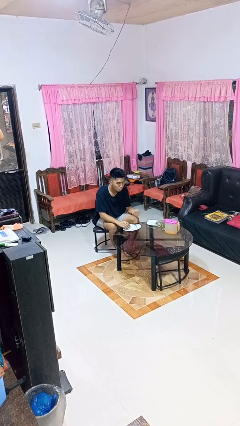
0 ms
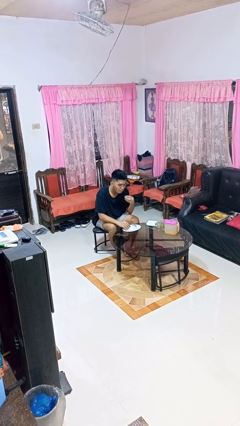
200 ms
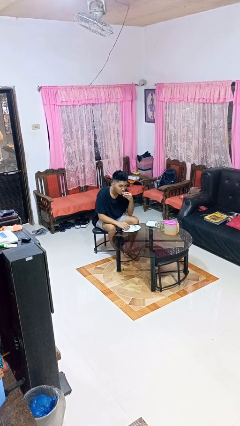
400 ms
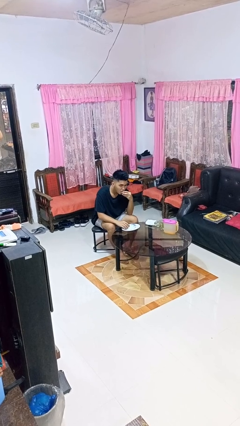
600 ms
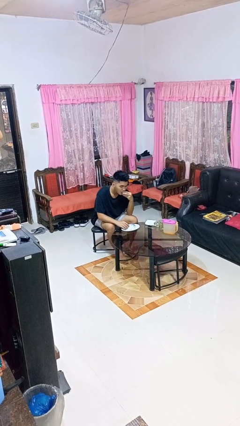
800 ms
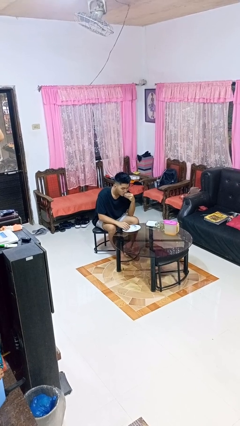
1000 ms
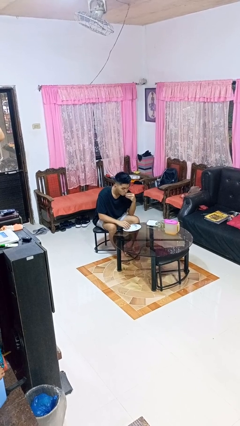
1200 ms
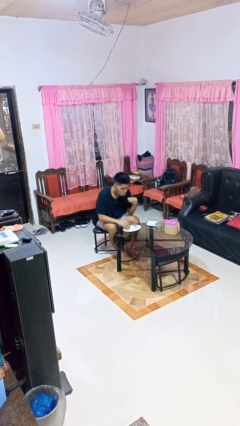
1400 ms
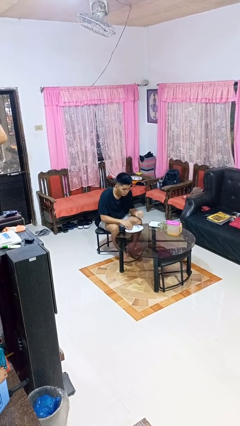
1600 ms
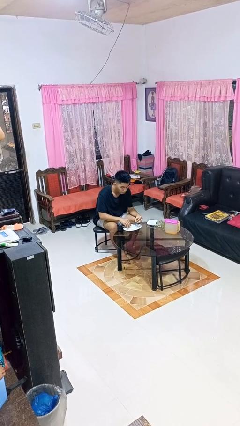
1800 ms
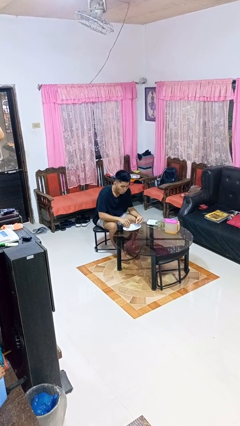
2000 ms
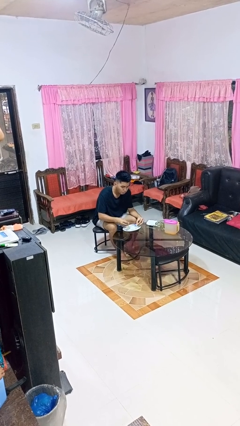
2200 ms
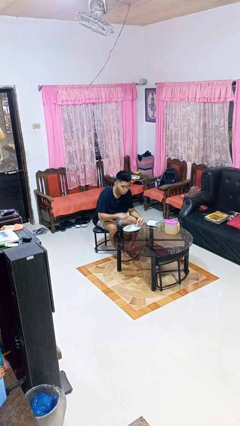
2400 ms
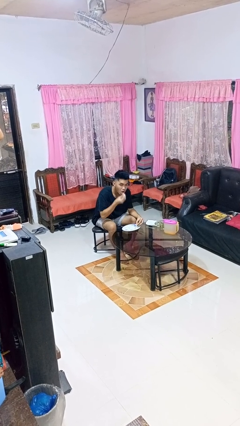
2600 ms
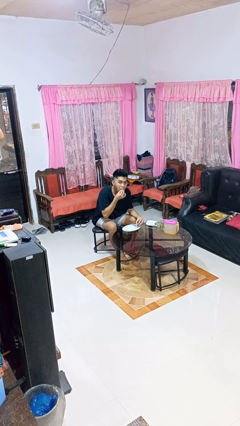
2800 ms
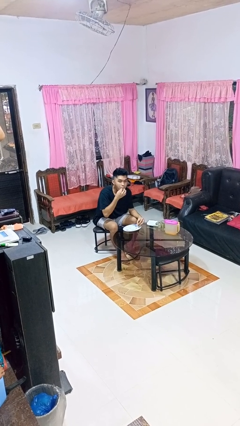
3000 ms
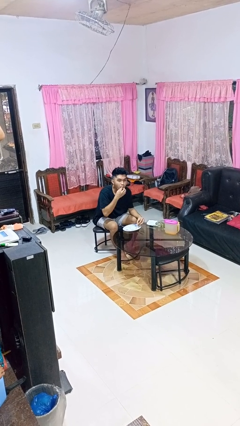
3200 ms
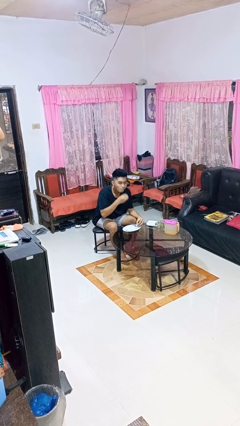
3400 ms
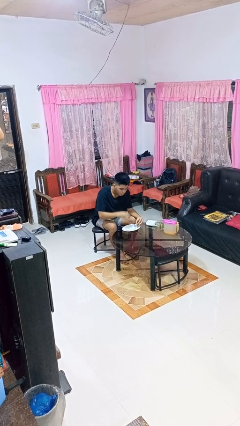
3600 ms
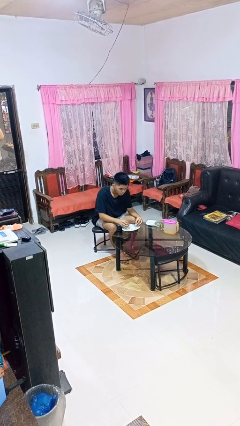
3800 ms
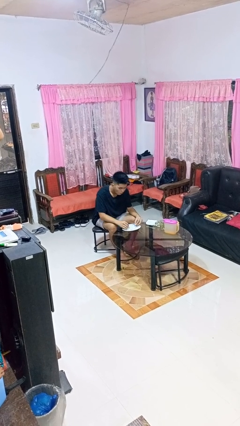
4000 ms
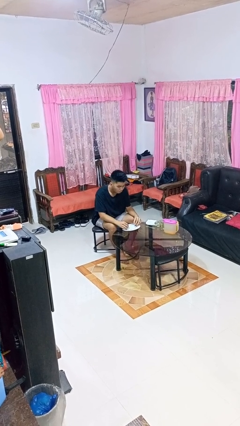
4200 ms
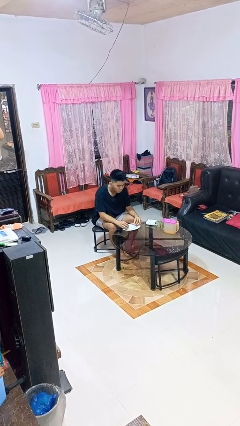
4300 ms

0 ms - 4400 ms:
person eats with hands

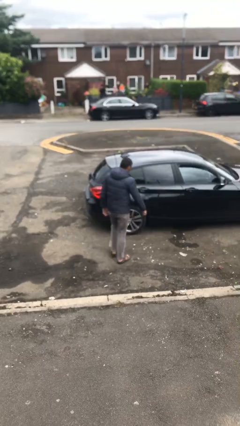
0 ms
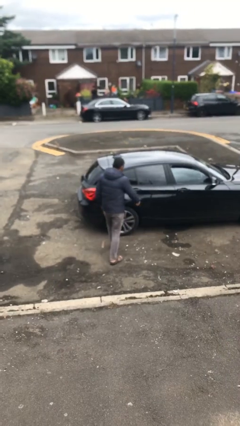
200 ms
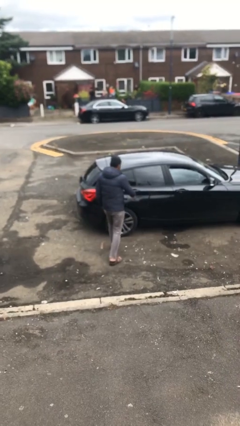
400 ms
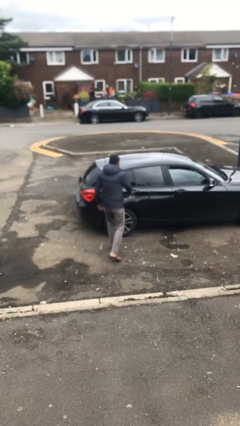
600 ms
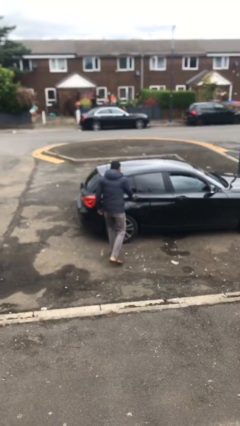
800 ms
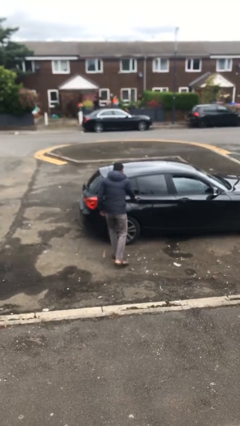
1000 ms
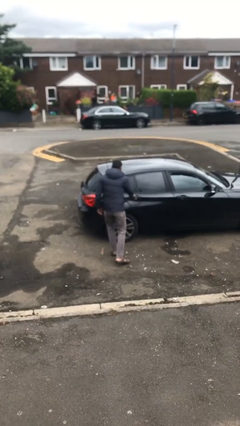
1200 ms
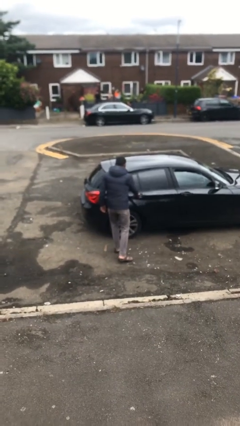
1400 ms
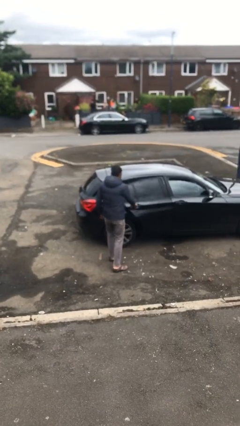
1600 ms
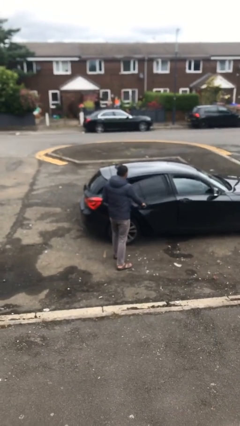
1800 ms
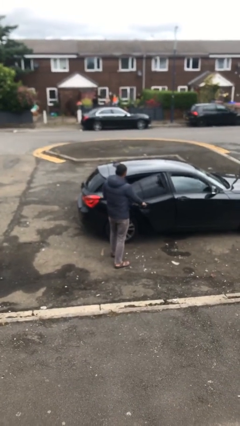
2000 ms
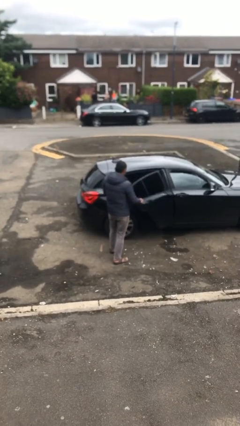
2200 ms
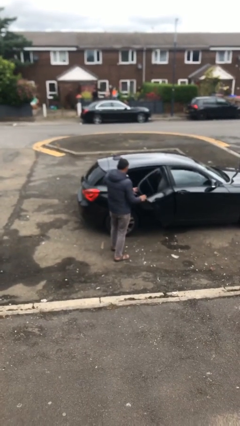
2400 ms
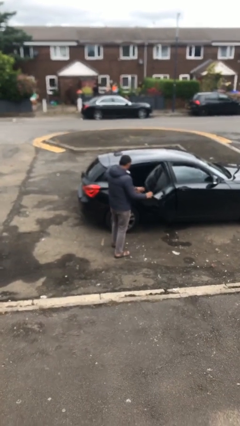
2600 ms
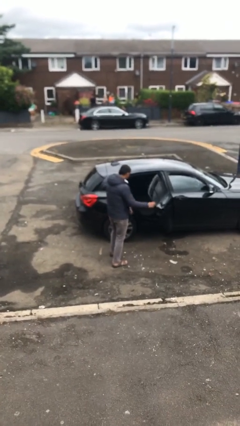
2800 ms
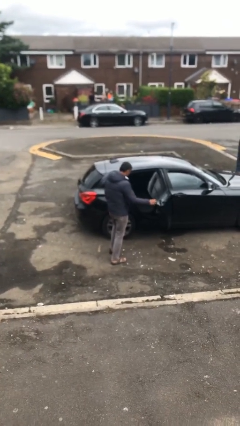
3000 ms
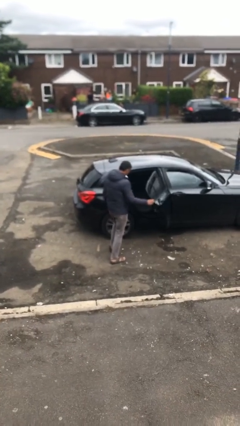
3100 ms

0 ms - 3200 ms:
person opens car door

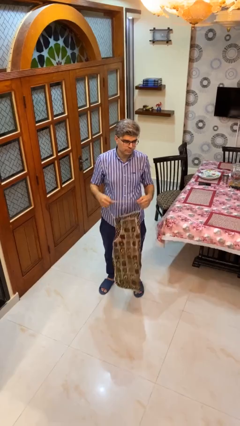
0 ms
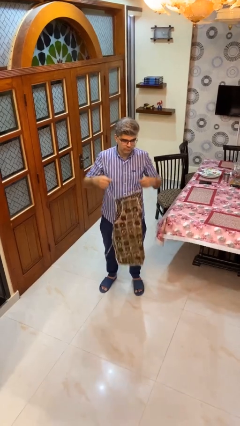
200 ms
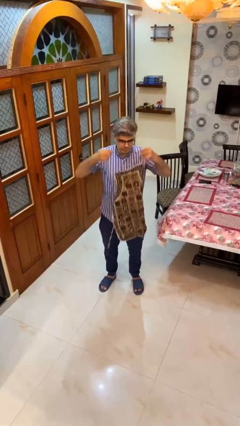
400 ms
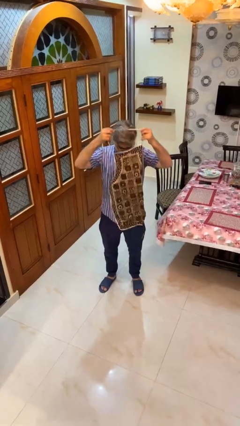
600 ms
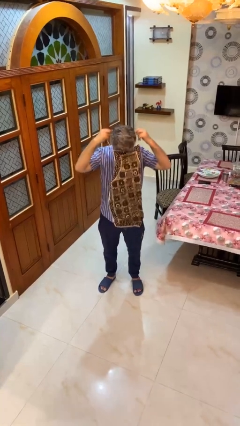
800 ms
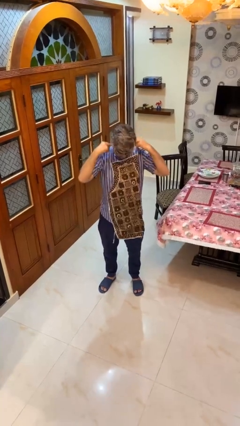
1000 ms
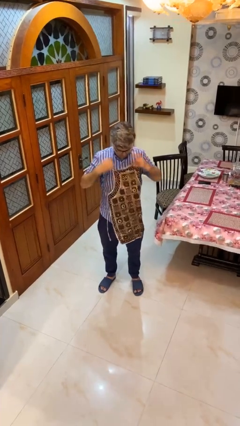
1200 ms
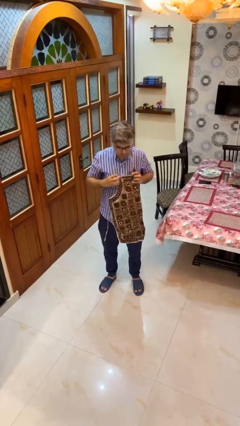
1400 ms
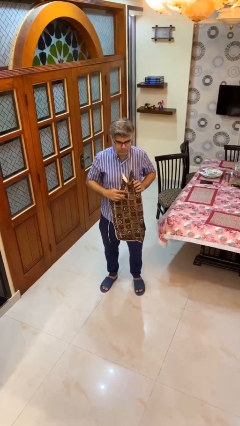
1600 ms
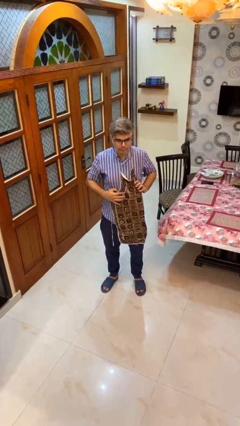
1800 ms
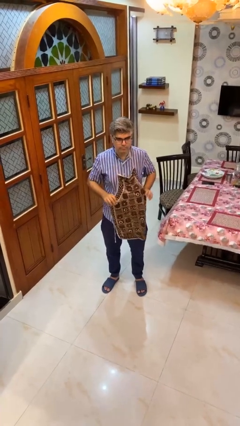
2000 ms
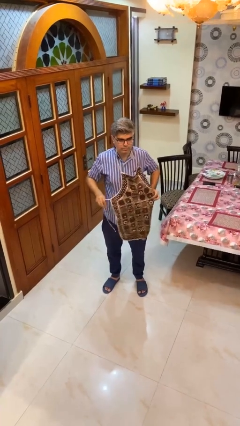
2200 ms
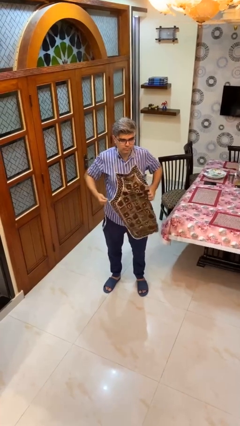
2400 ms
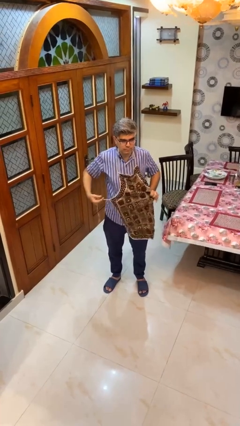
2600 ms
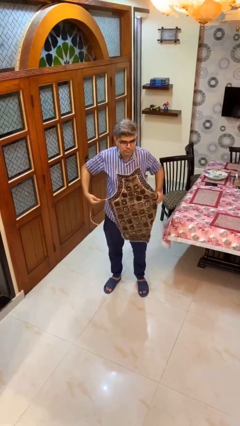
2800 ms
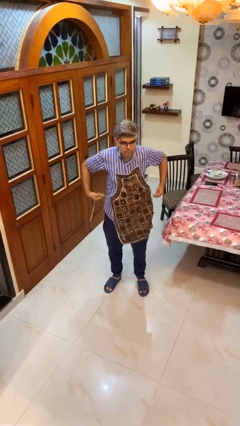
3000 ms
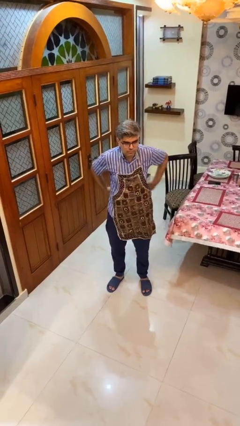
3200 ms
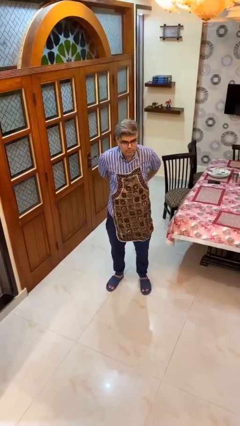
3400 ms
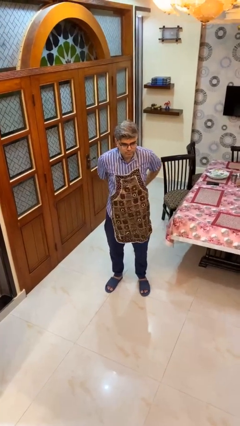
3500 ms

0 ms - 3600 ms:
person puts on apron

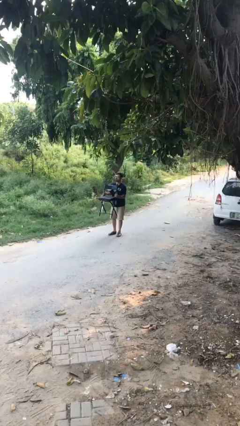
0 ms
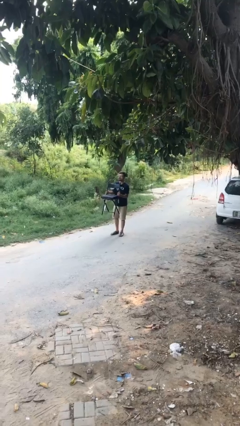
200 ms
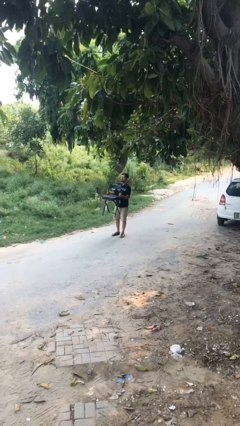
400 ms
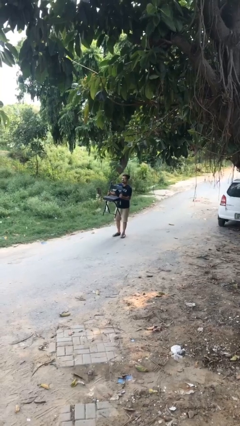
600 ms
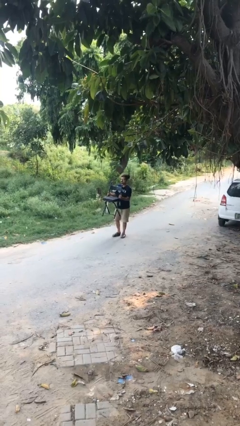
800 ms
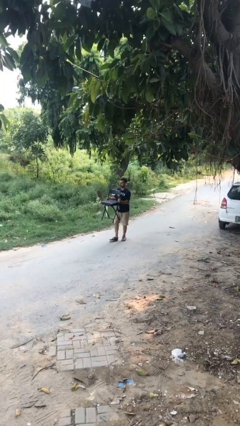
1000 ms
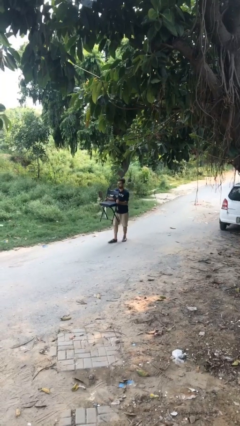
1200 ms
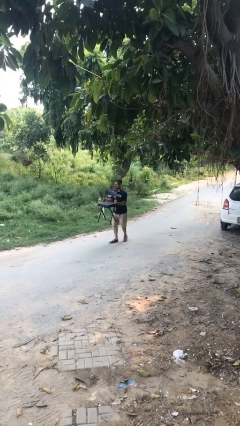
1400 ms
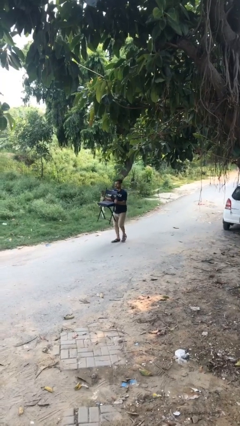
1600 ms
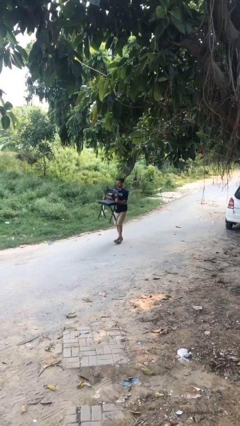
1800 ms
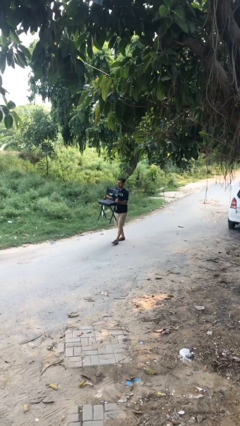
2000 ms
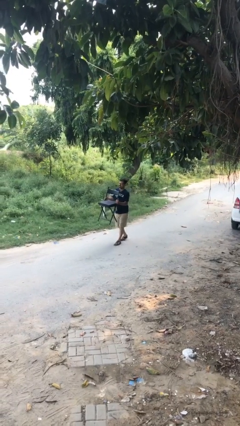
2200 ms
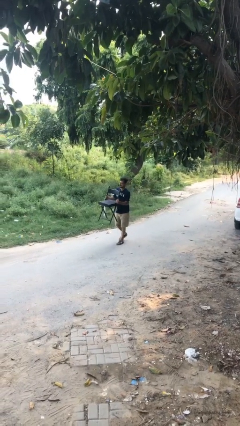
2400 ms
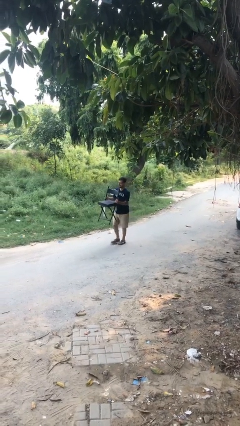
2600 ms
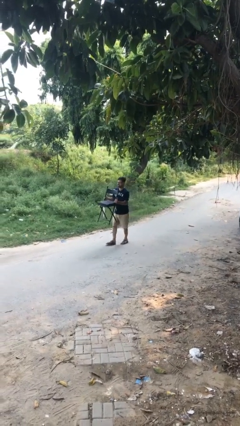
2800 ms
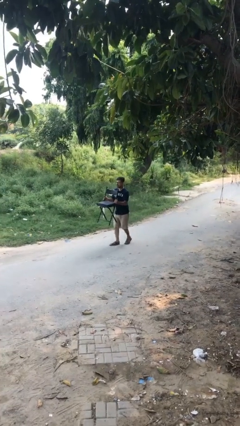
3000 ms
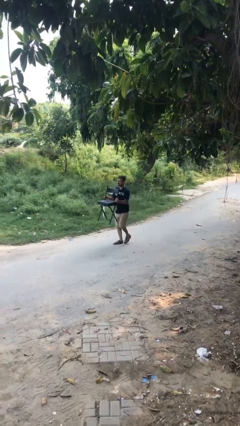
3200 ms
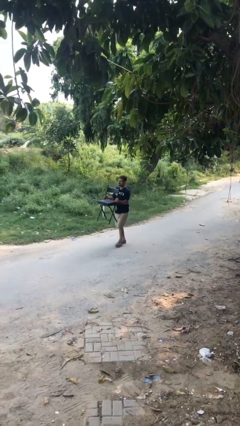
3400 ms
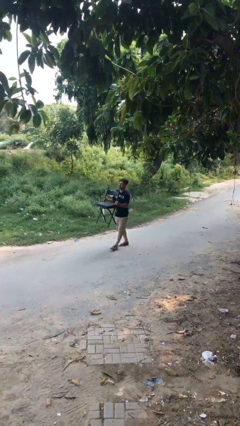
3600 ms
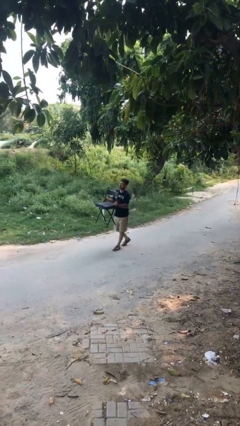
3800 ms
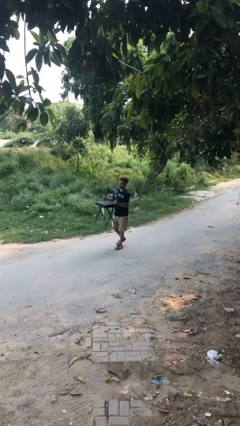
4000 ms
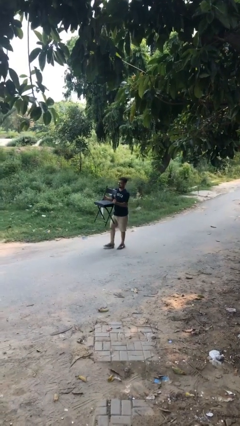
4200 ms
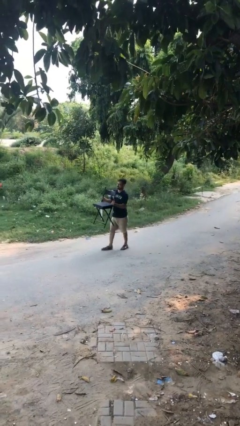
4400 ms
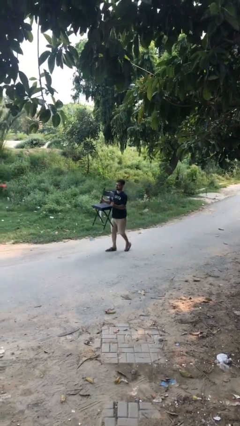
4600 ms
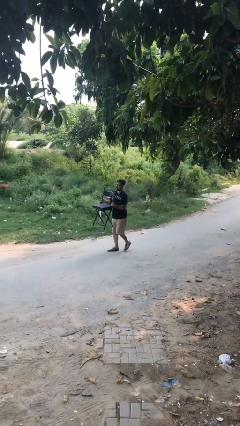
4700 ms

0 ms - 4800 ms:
person carries heavy object

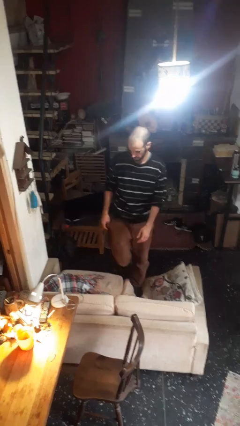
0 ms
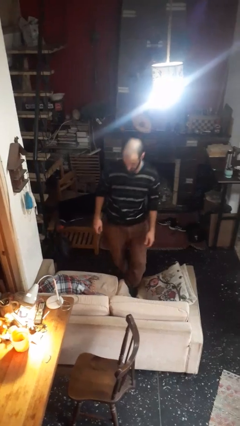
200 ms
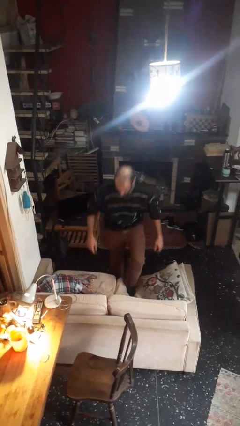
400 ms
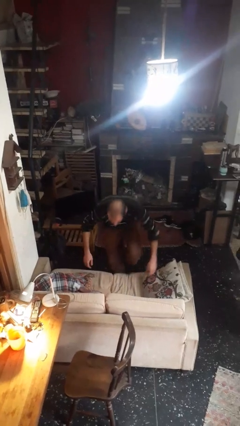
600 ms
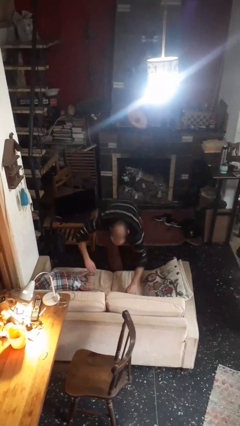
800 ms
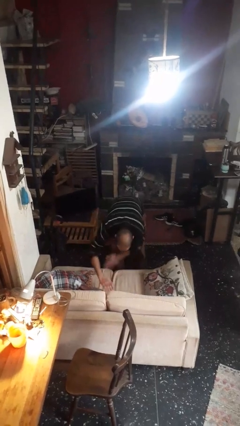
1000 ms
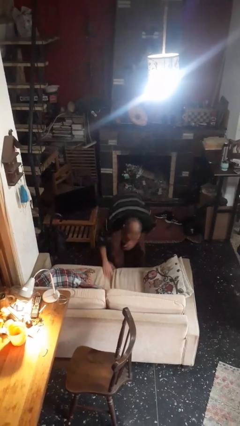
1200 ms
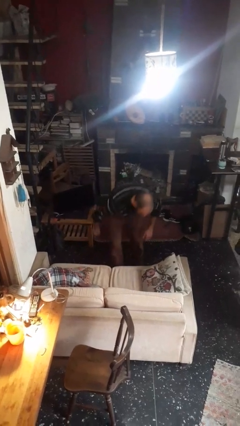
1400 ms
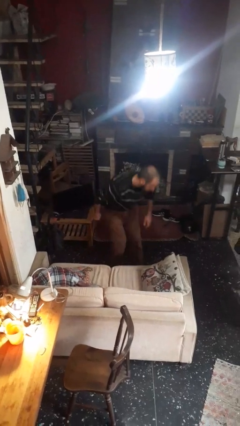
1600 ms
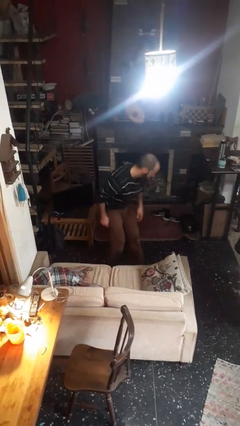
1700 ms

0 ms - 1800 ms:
person climbs off couch
